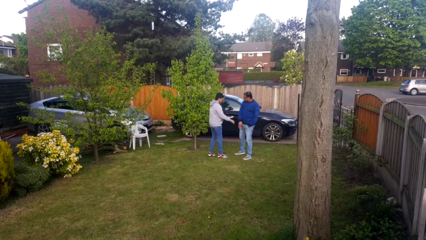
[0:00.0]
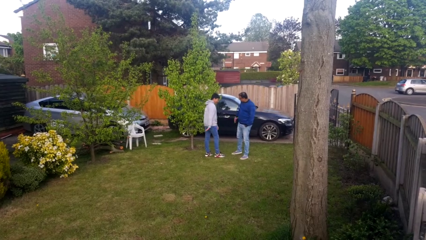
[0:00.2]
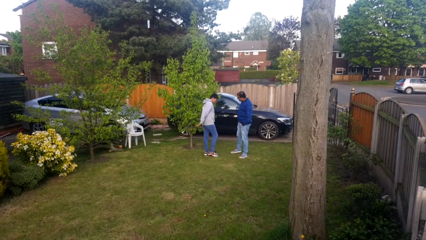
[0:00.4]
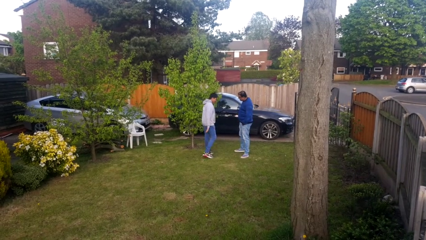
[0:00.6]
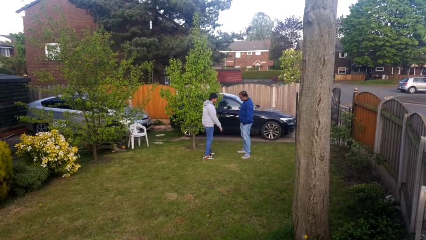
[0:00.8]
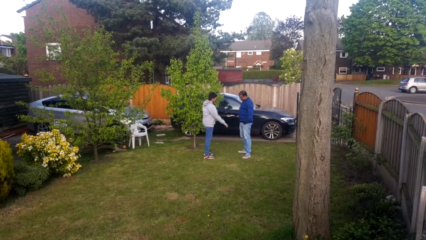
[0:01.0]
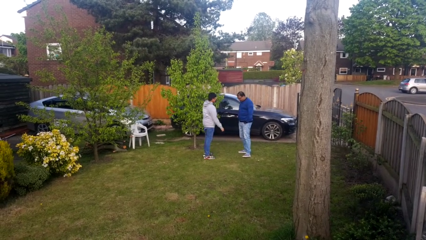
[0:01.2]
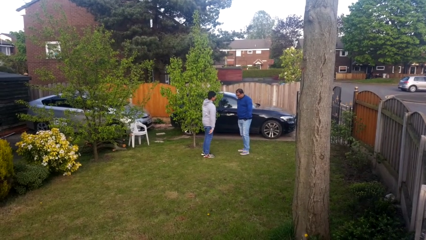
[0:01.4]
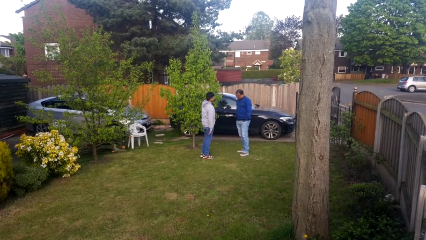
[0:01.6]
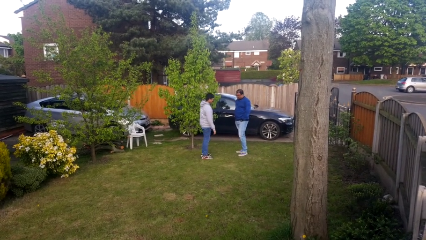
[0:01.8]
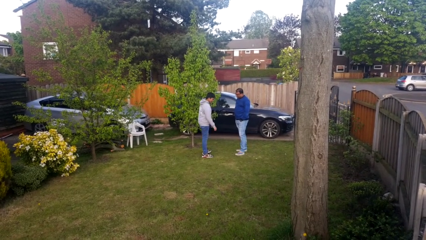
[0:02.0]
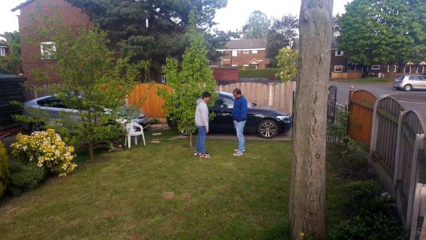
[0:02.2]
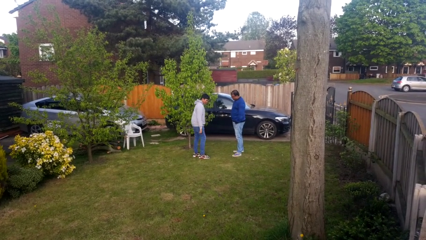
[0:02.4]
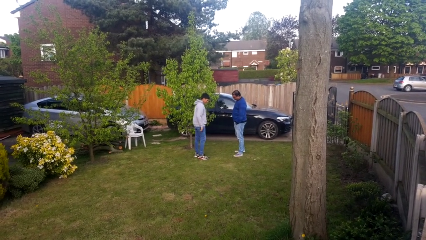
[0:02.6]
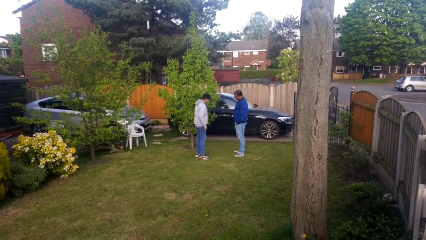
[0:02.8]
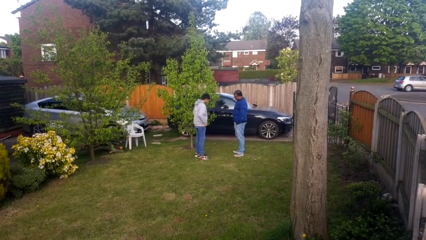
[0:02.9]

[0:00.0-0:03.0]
person highfives hand

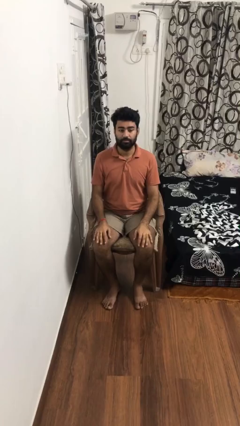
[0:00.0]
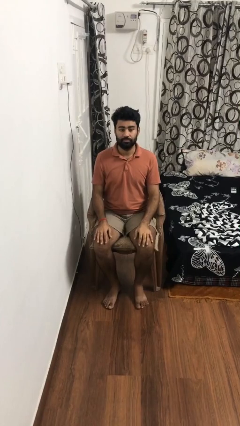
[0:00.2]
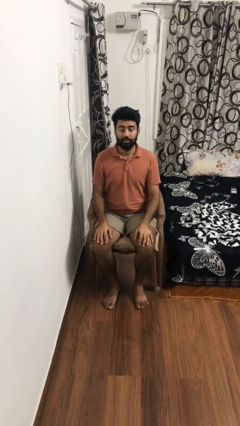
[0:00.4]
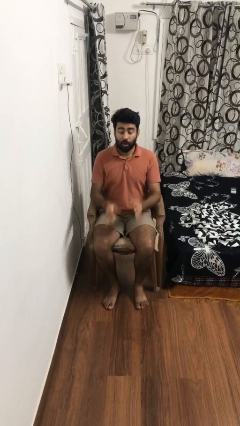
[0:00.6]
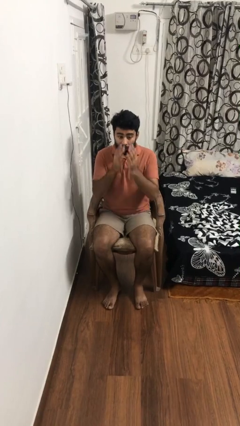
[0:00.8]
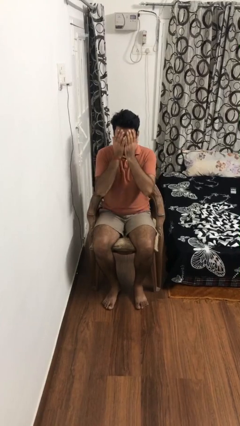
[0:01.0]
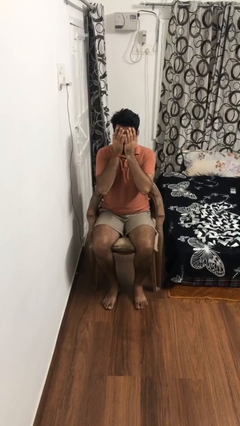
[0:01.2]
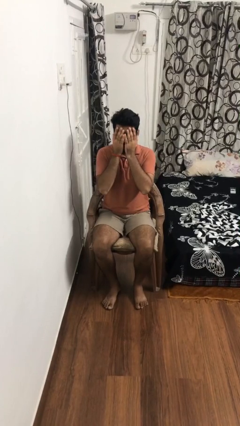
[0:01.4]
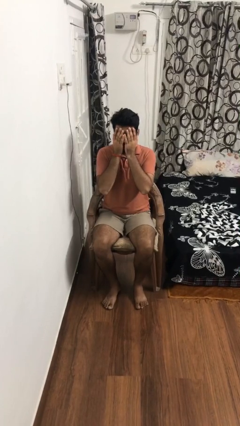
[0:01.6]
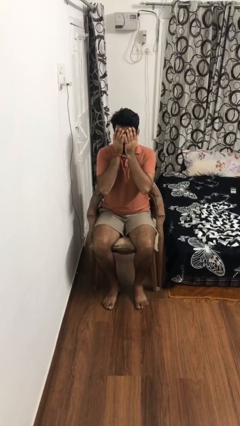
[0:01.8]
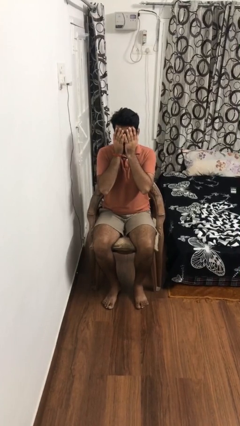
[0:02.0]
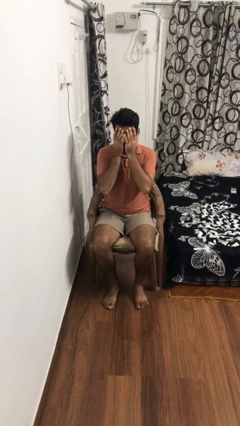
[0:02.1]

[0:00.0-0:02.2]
person covers face with hands

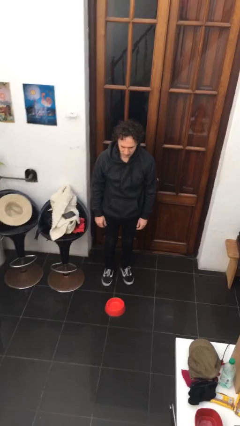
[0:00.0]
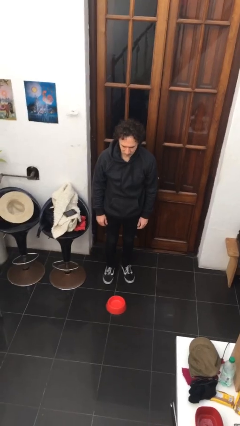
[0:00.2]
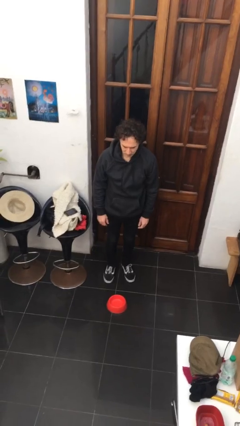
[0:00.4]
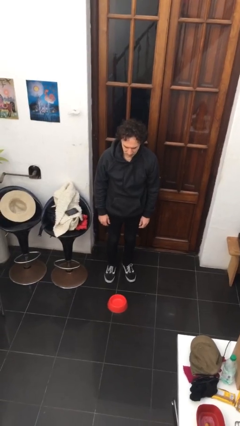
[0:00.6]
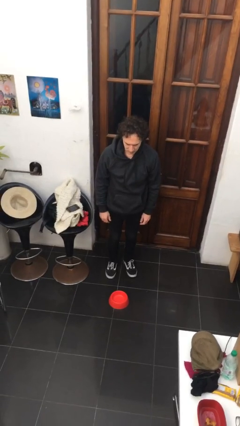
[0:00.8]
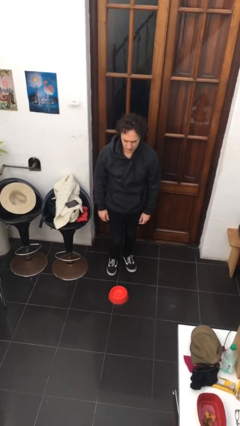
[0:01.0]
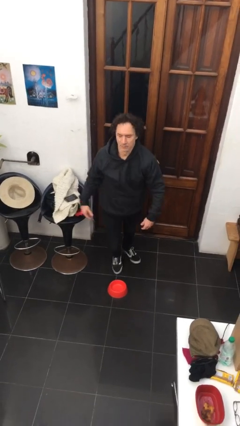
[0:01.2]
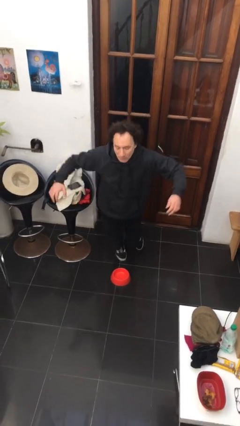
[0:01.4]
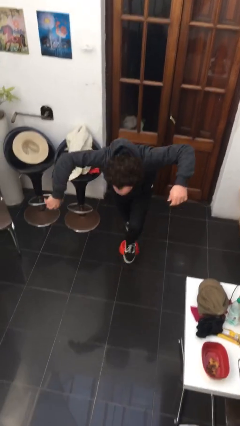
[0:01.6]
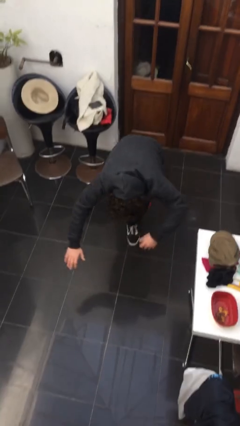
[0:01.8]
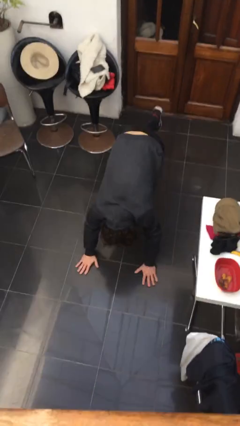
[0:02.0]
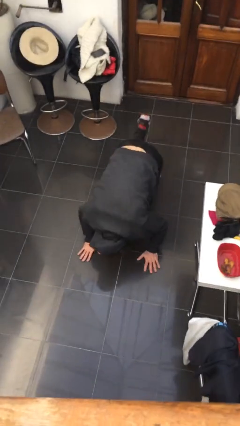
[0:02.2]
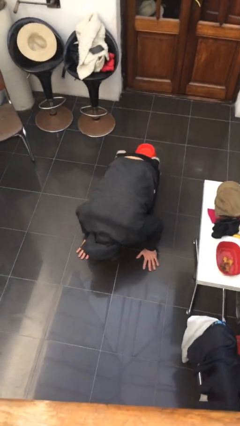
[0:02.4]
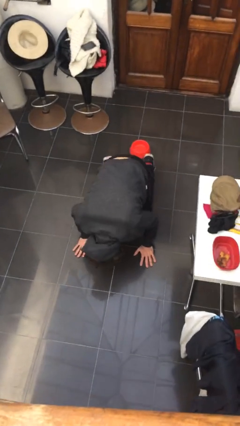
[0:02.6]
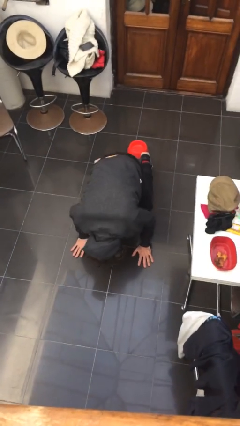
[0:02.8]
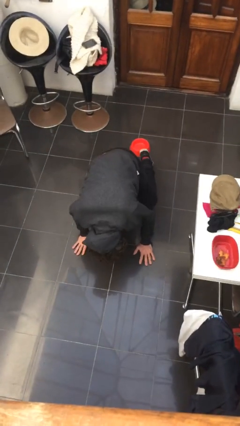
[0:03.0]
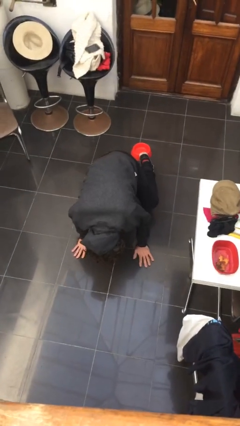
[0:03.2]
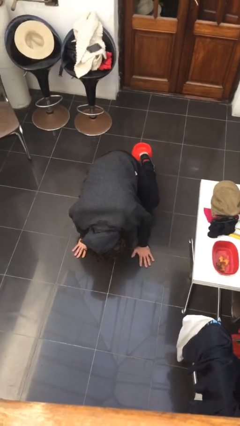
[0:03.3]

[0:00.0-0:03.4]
person trips on object on floor

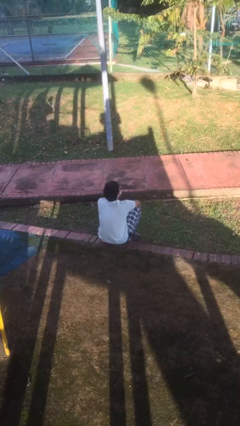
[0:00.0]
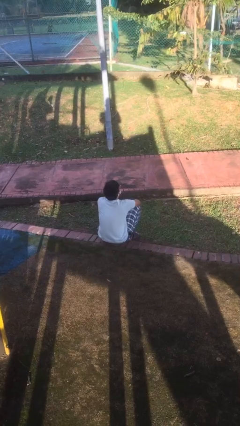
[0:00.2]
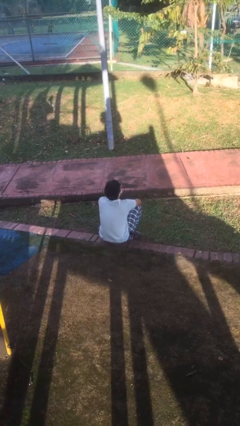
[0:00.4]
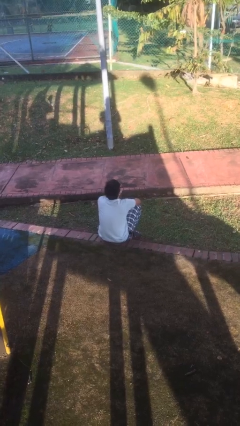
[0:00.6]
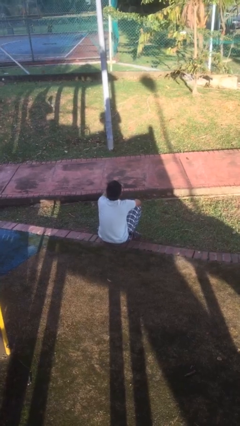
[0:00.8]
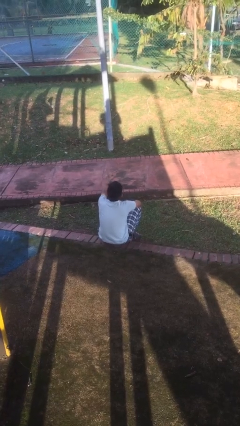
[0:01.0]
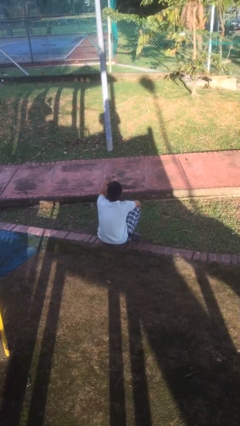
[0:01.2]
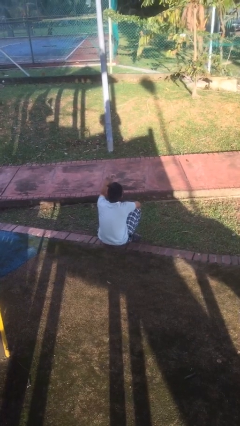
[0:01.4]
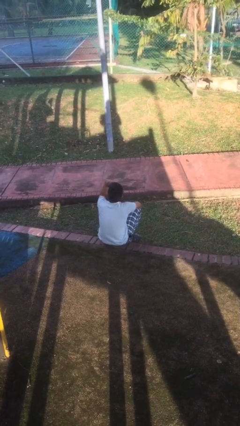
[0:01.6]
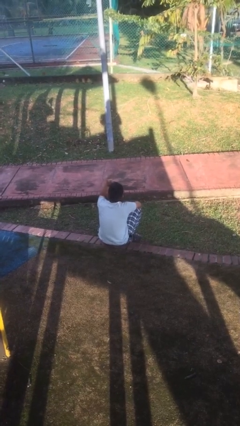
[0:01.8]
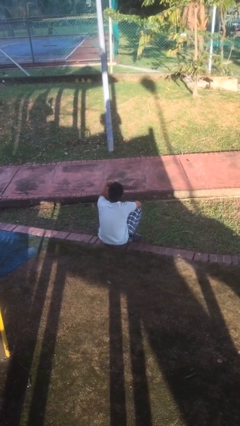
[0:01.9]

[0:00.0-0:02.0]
person gestures watch closely

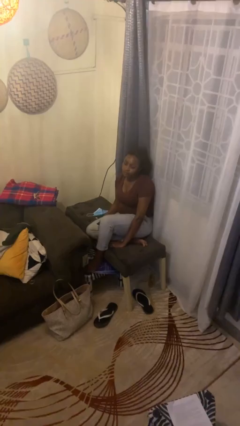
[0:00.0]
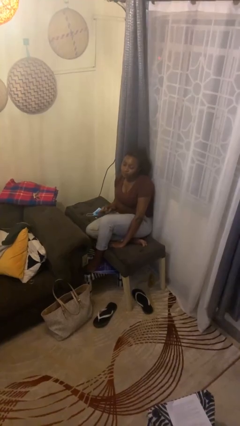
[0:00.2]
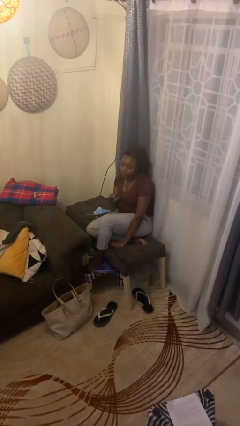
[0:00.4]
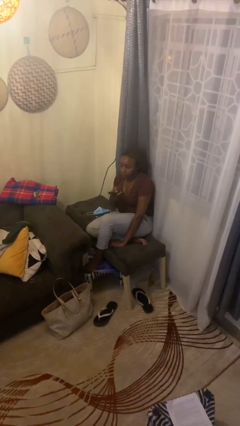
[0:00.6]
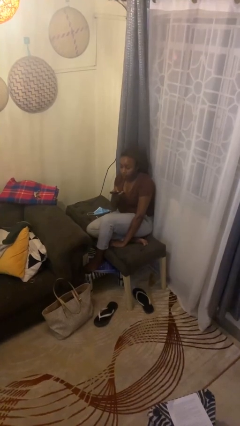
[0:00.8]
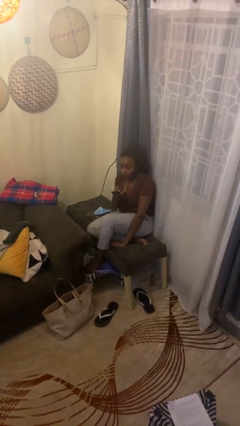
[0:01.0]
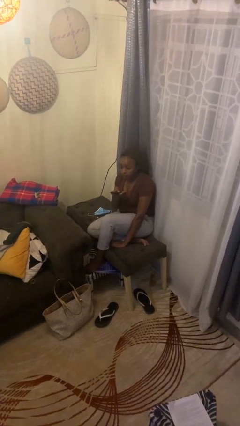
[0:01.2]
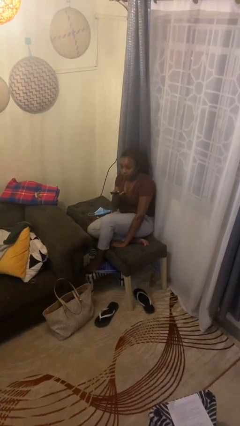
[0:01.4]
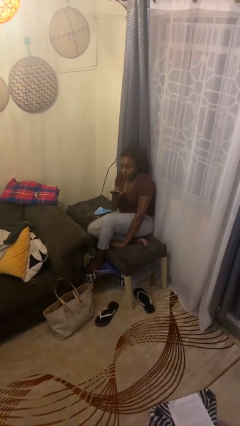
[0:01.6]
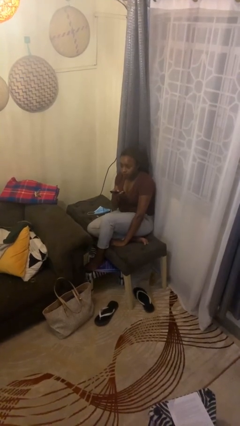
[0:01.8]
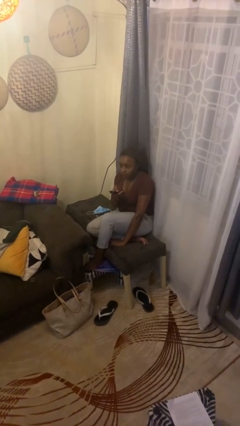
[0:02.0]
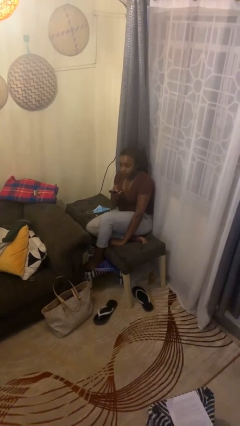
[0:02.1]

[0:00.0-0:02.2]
person uses television remote

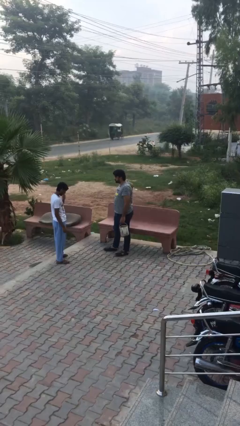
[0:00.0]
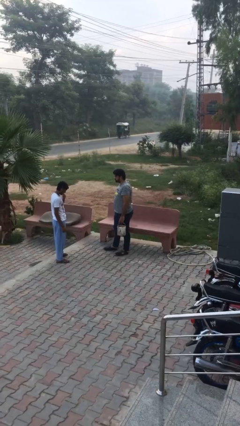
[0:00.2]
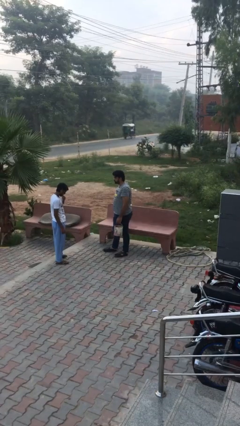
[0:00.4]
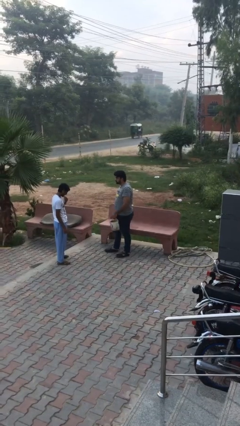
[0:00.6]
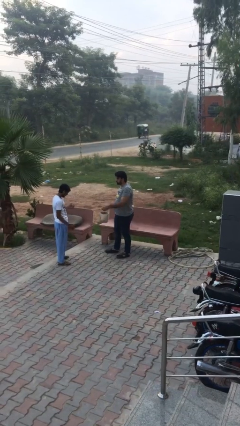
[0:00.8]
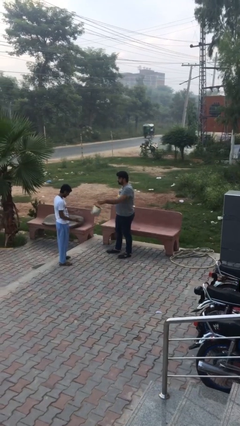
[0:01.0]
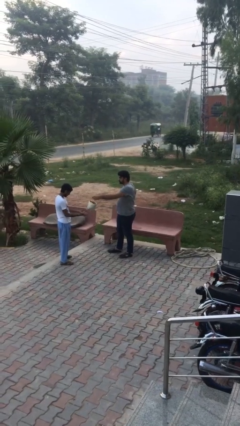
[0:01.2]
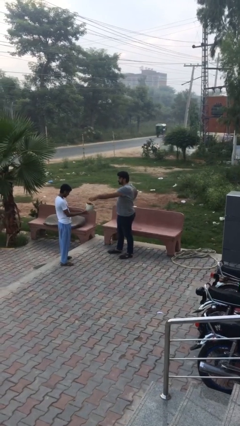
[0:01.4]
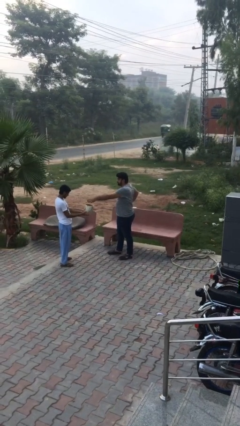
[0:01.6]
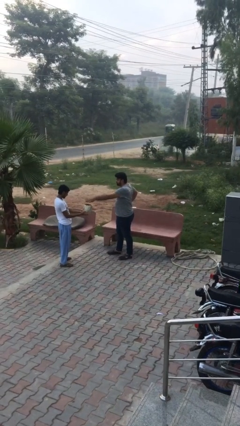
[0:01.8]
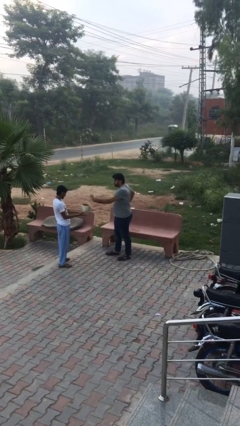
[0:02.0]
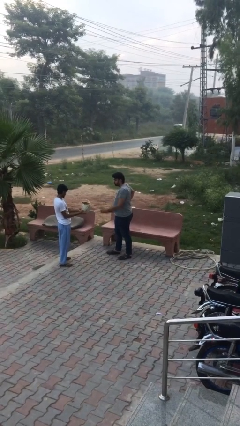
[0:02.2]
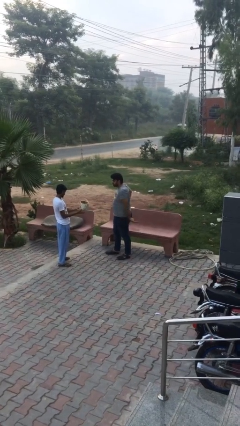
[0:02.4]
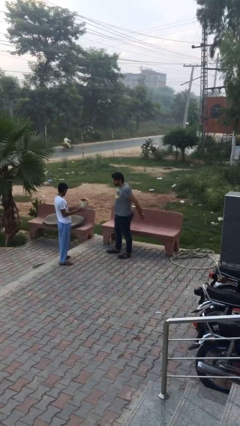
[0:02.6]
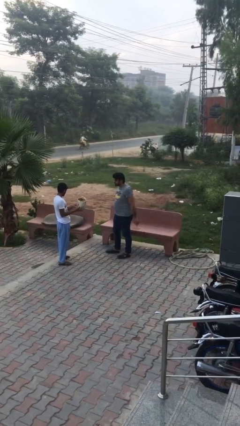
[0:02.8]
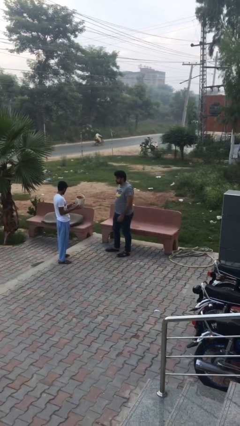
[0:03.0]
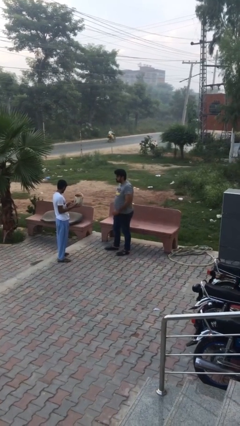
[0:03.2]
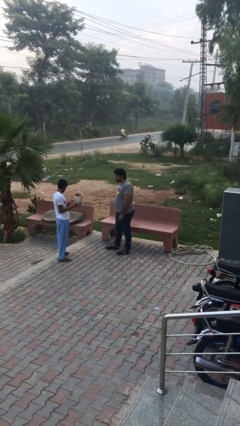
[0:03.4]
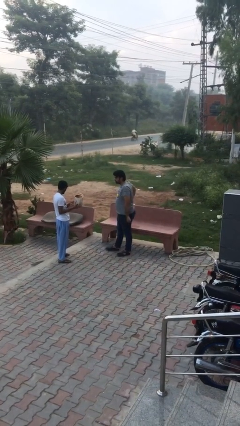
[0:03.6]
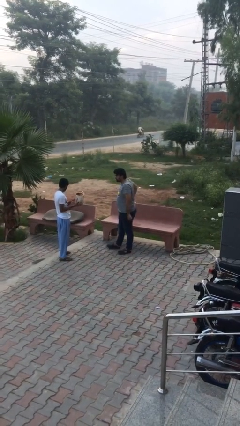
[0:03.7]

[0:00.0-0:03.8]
person transfers object to person

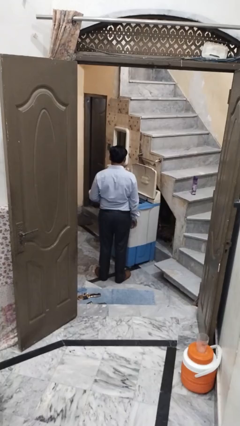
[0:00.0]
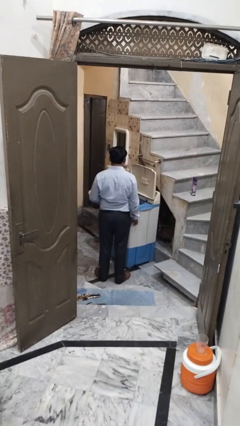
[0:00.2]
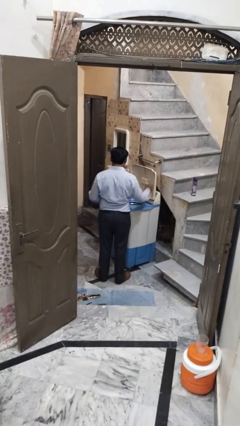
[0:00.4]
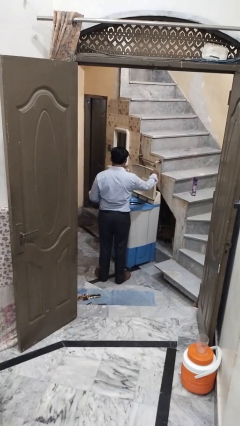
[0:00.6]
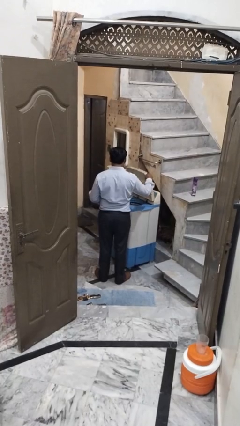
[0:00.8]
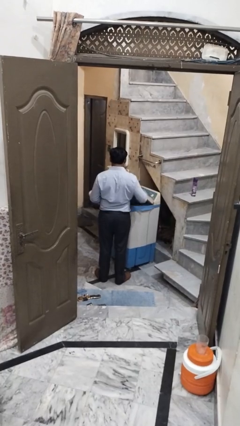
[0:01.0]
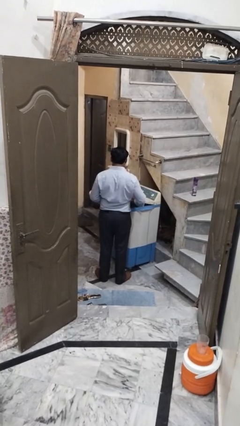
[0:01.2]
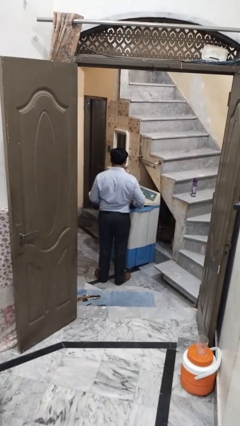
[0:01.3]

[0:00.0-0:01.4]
person closes clothes washer
